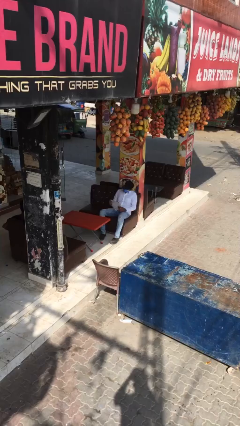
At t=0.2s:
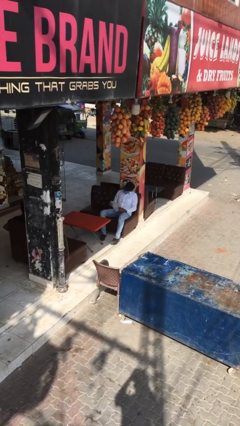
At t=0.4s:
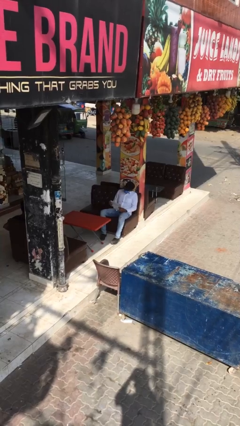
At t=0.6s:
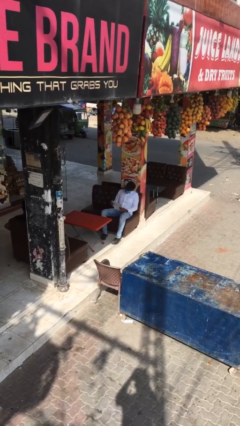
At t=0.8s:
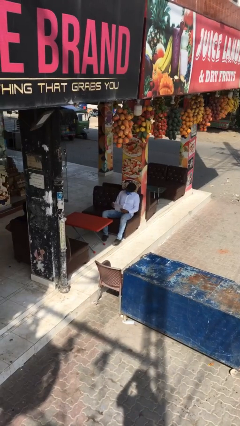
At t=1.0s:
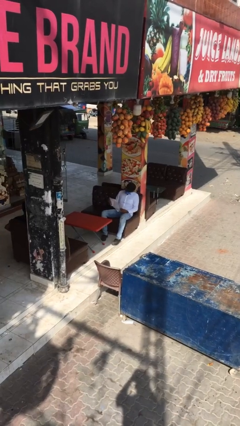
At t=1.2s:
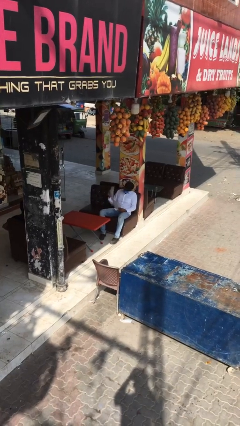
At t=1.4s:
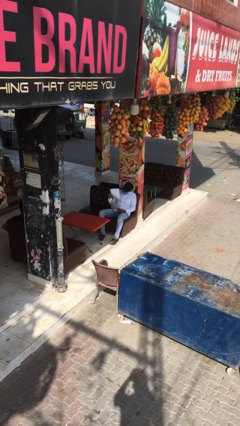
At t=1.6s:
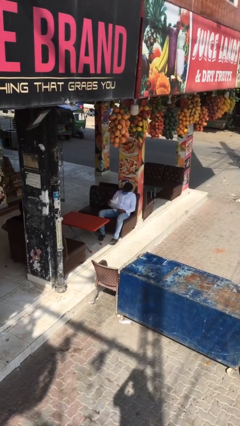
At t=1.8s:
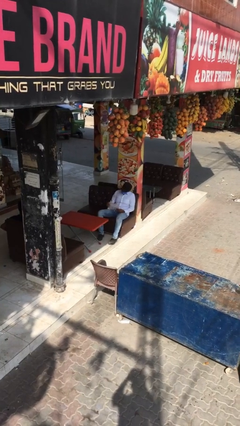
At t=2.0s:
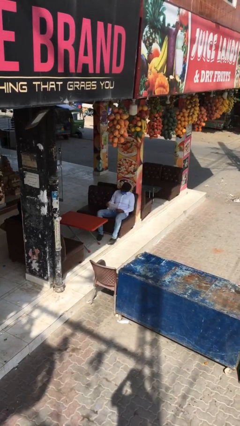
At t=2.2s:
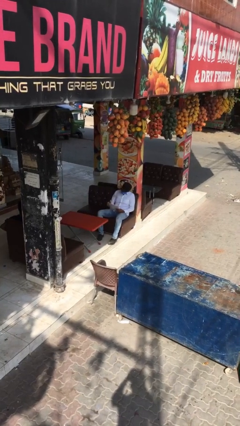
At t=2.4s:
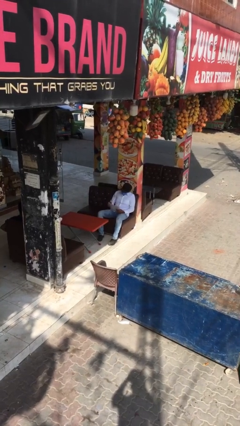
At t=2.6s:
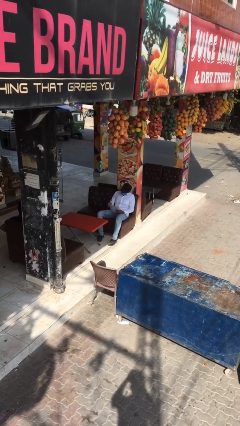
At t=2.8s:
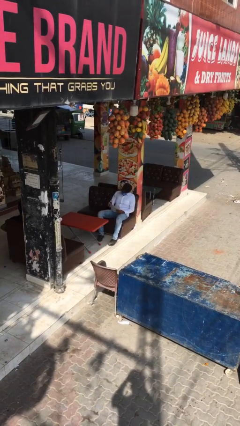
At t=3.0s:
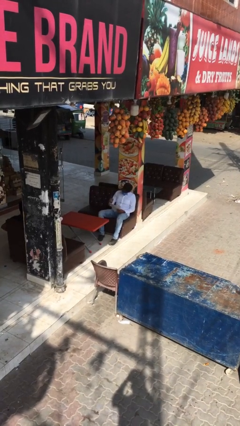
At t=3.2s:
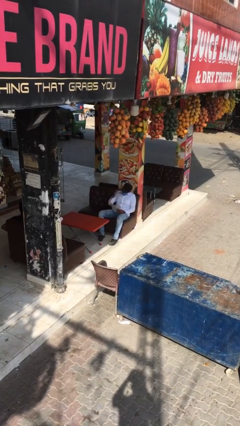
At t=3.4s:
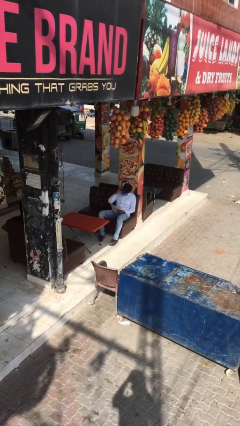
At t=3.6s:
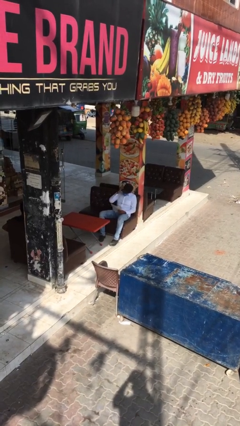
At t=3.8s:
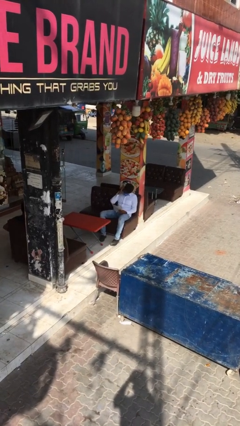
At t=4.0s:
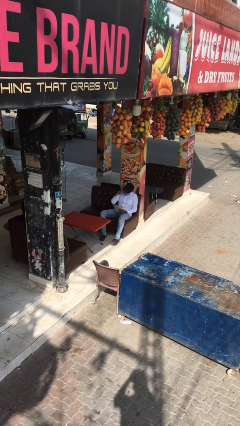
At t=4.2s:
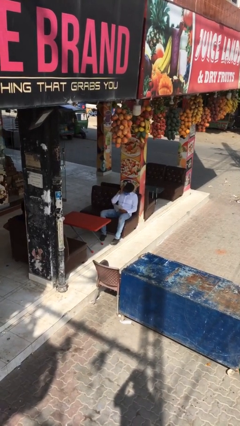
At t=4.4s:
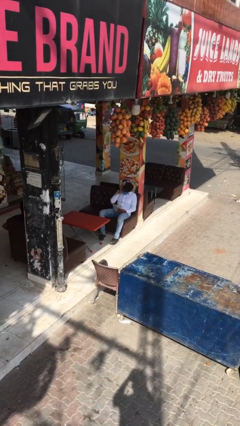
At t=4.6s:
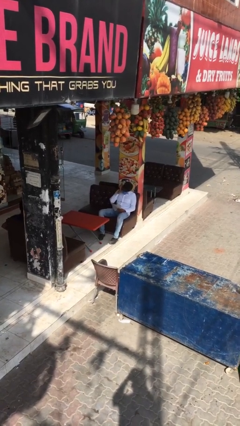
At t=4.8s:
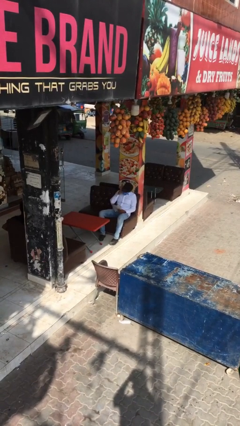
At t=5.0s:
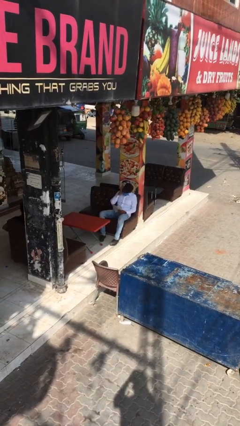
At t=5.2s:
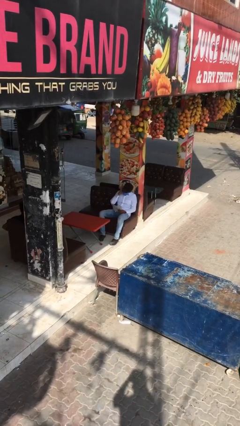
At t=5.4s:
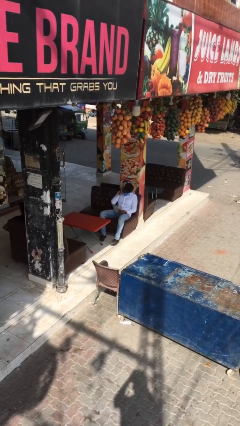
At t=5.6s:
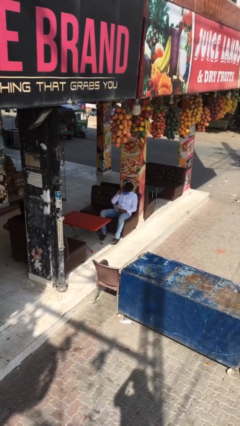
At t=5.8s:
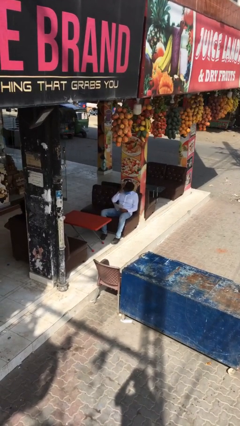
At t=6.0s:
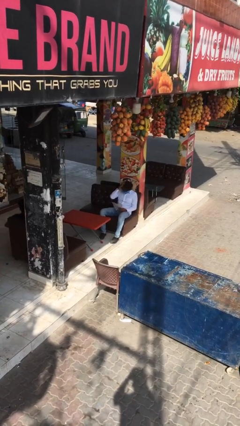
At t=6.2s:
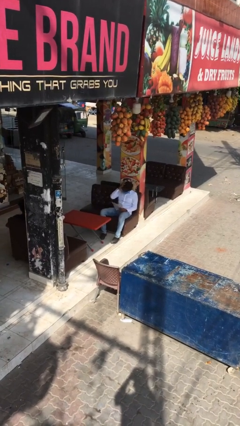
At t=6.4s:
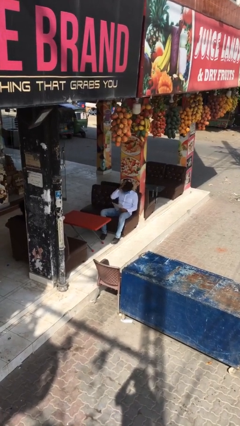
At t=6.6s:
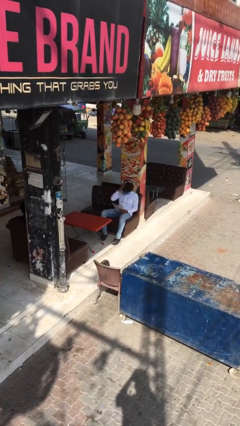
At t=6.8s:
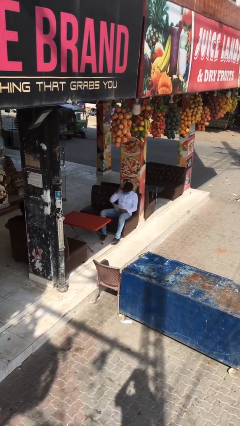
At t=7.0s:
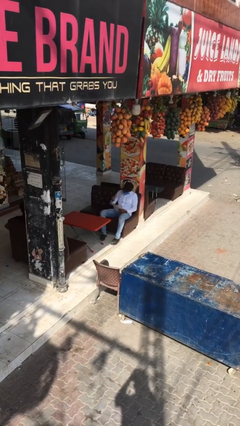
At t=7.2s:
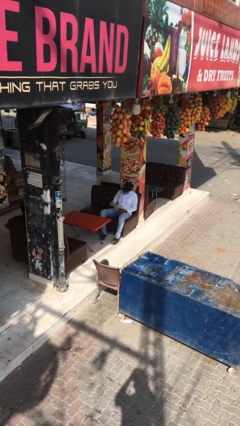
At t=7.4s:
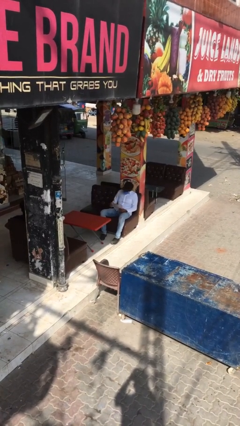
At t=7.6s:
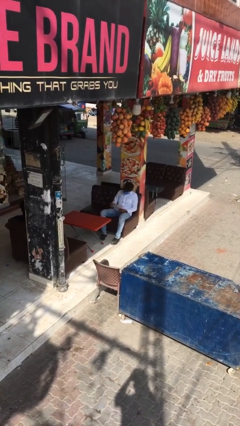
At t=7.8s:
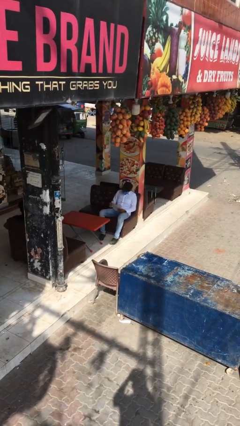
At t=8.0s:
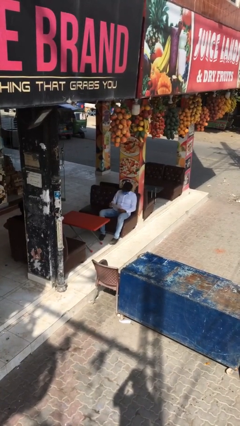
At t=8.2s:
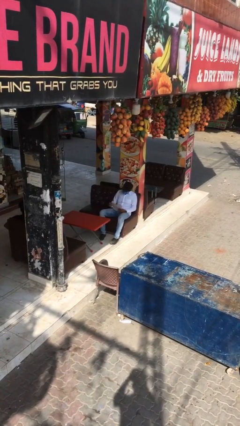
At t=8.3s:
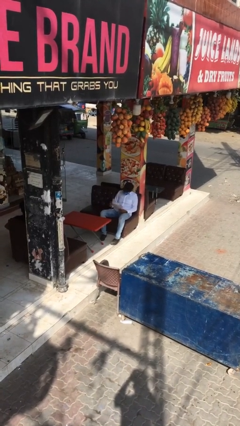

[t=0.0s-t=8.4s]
person reads document

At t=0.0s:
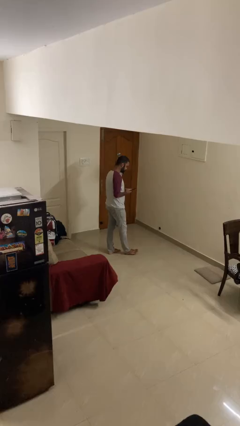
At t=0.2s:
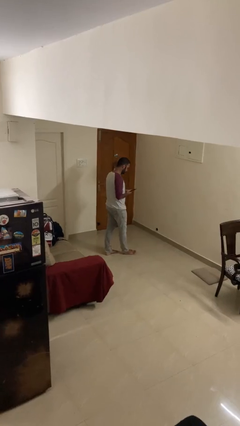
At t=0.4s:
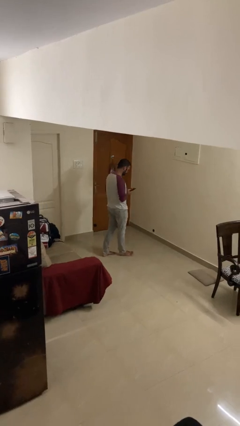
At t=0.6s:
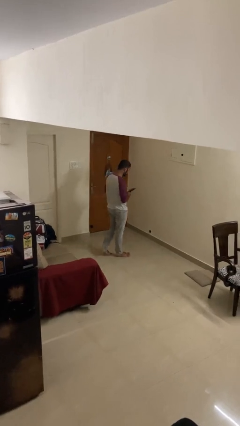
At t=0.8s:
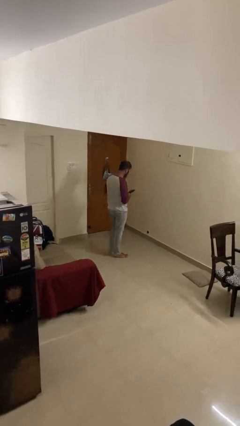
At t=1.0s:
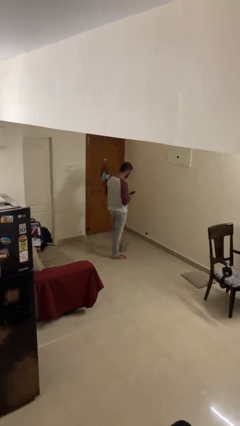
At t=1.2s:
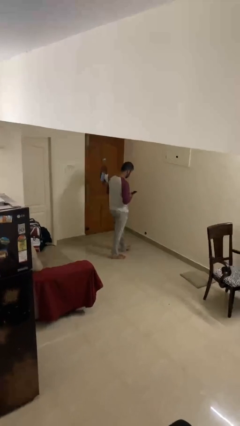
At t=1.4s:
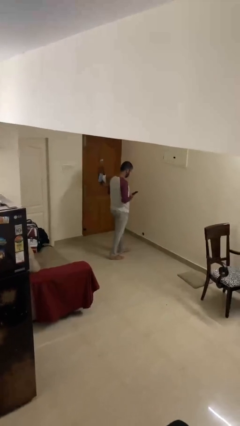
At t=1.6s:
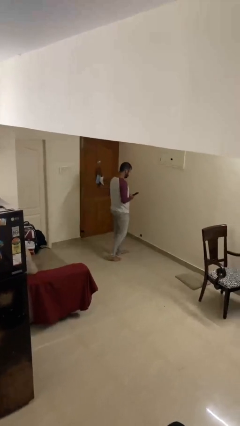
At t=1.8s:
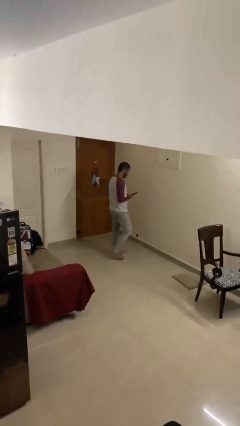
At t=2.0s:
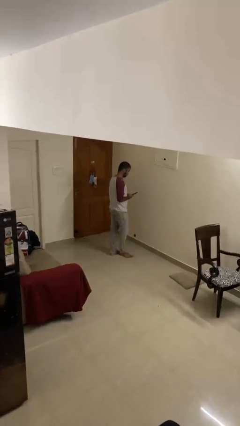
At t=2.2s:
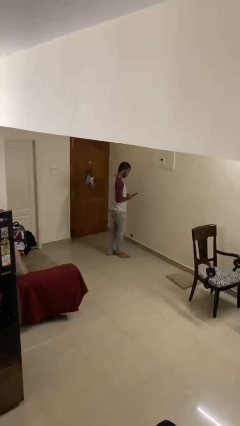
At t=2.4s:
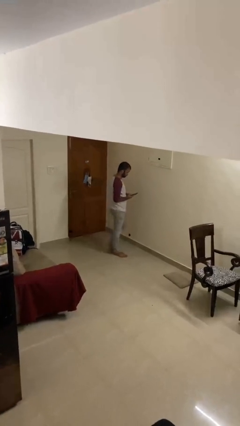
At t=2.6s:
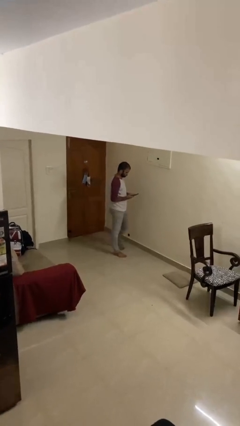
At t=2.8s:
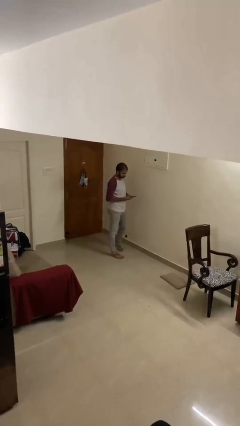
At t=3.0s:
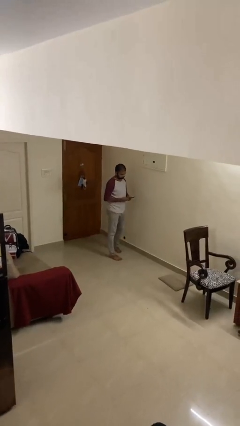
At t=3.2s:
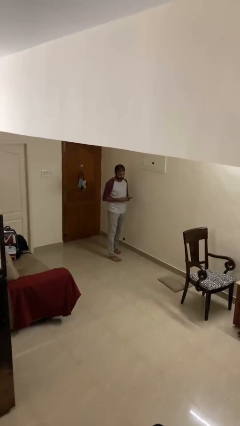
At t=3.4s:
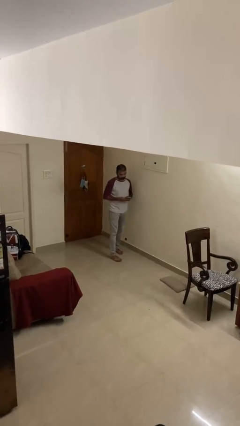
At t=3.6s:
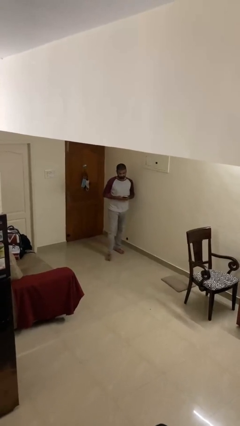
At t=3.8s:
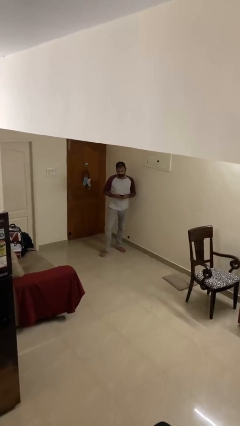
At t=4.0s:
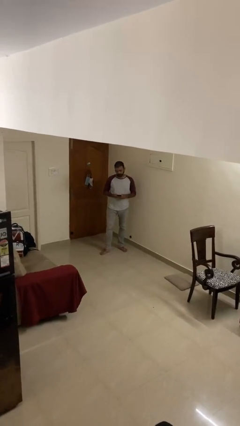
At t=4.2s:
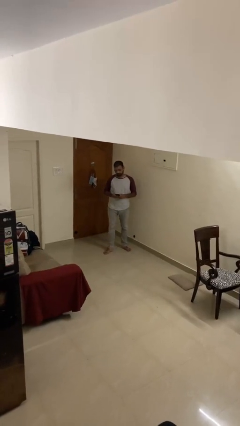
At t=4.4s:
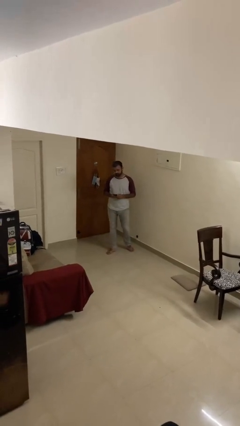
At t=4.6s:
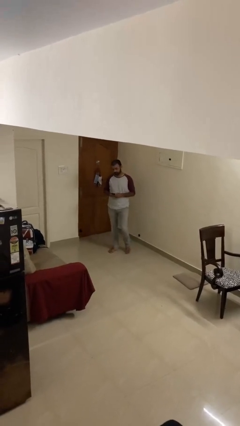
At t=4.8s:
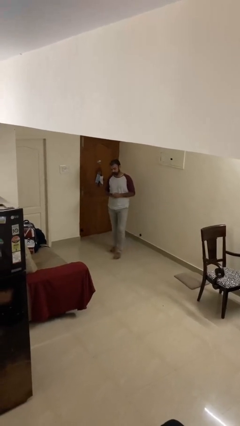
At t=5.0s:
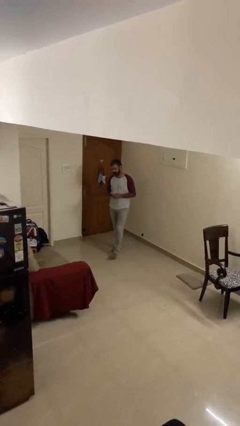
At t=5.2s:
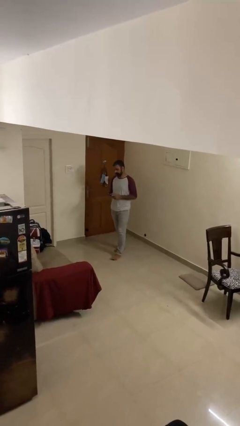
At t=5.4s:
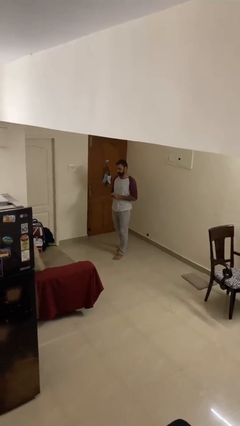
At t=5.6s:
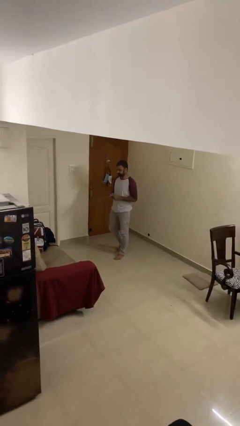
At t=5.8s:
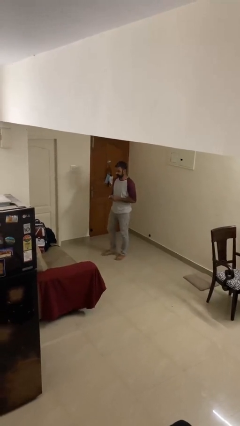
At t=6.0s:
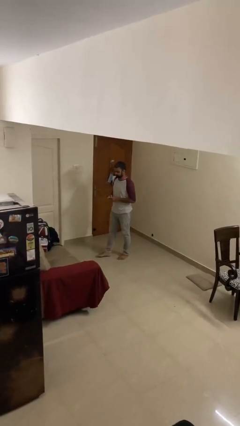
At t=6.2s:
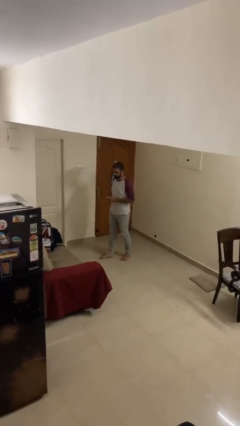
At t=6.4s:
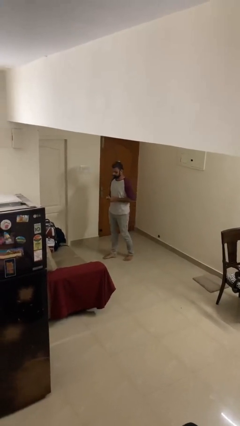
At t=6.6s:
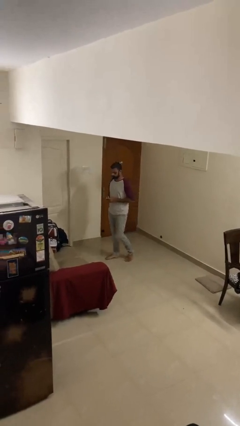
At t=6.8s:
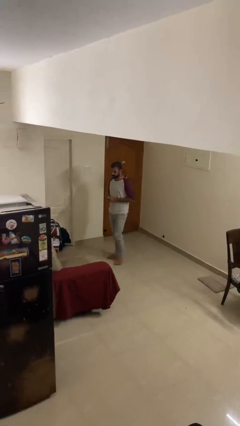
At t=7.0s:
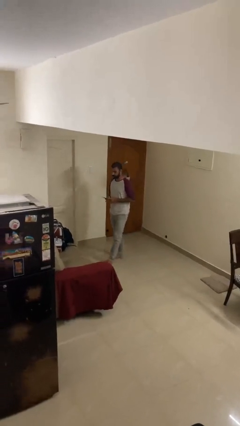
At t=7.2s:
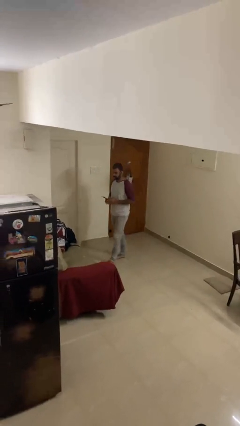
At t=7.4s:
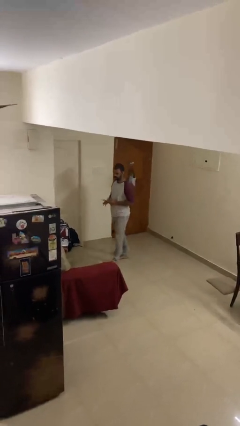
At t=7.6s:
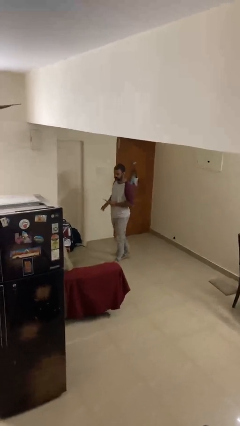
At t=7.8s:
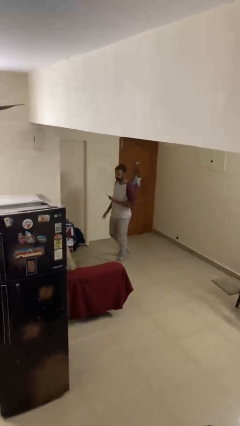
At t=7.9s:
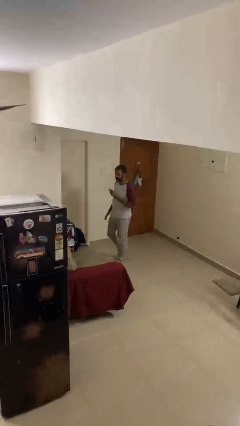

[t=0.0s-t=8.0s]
person texts on phone

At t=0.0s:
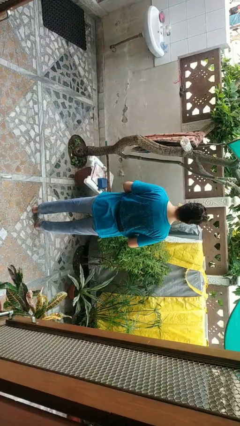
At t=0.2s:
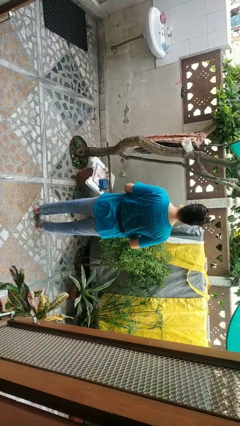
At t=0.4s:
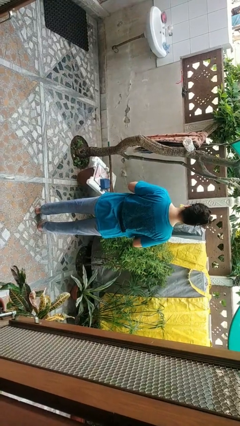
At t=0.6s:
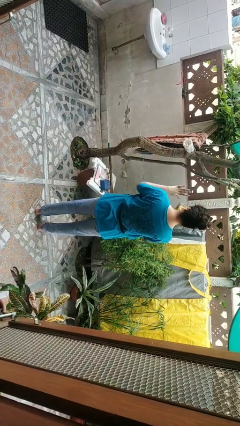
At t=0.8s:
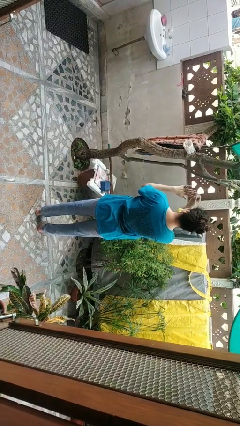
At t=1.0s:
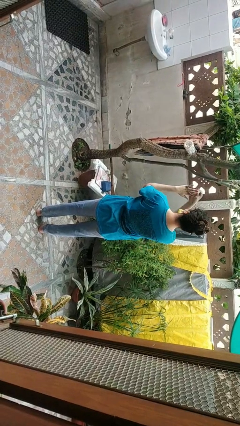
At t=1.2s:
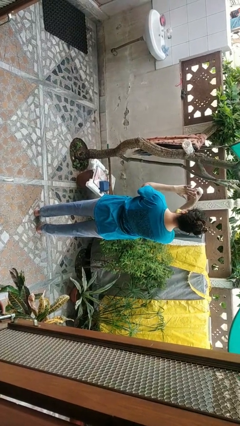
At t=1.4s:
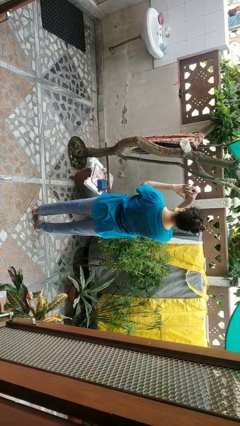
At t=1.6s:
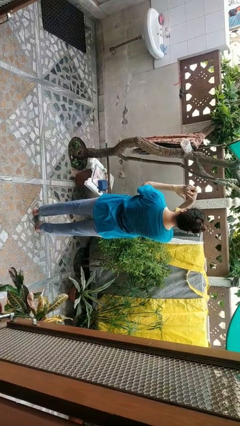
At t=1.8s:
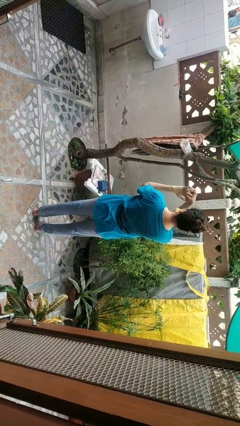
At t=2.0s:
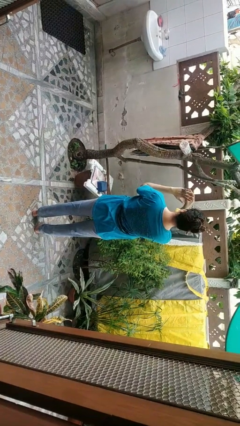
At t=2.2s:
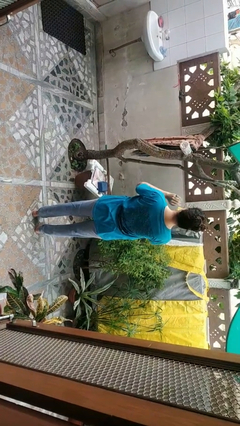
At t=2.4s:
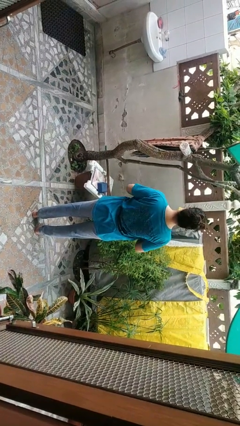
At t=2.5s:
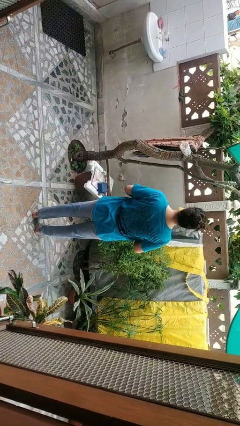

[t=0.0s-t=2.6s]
person puts on ring
